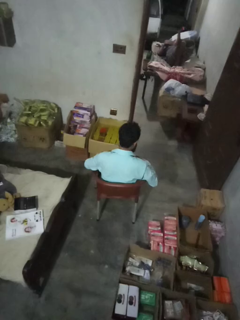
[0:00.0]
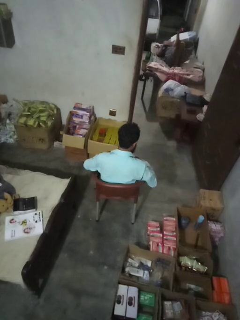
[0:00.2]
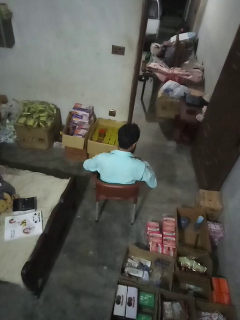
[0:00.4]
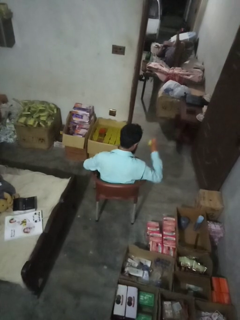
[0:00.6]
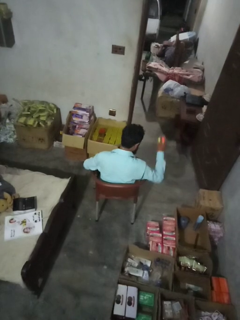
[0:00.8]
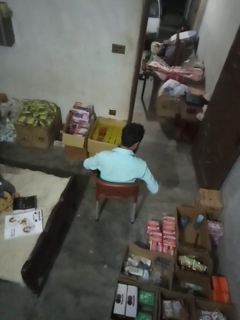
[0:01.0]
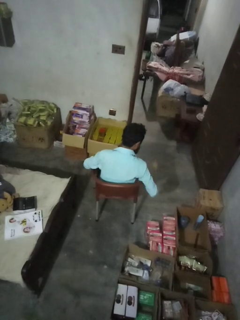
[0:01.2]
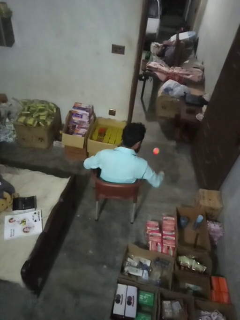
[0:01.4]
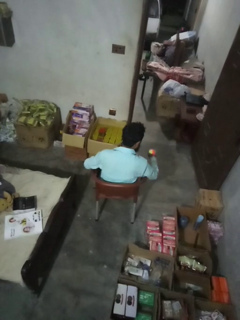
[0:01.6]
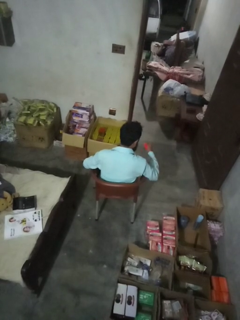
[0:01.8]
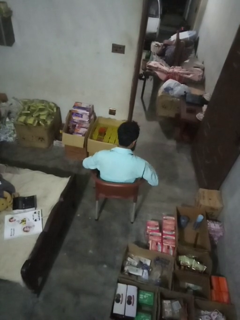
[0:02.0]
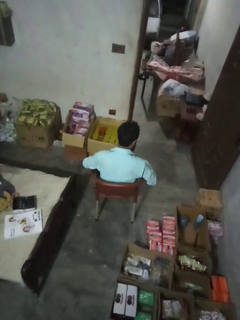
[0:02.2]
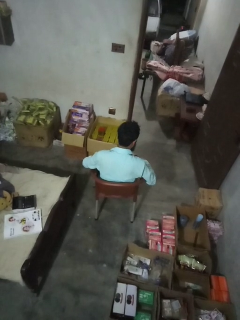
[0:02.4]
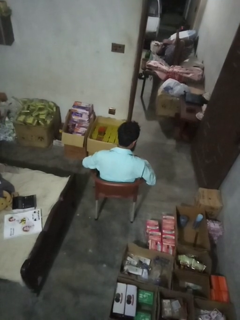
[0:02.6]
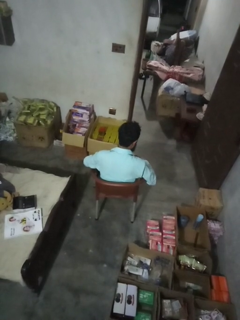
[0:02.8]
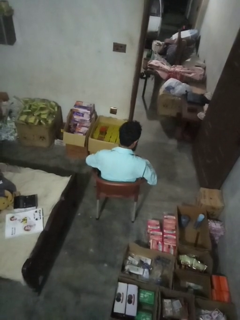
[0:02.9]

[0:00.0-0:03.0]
person bounces ball on floor

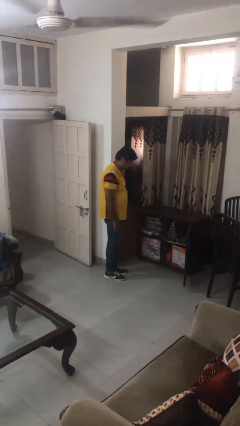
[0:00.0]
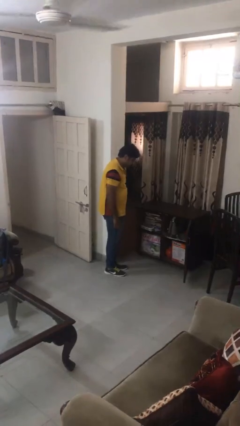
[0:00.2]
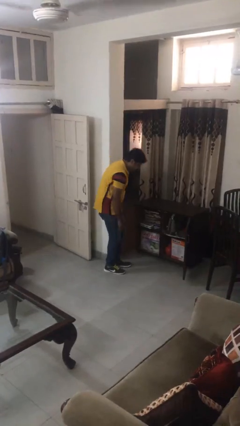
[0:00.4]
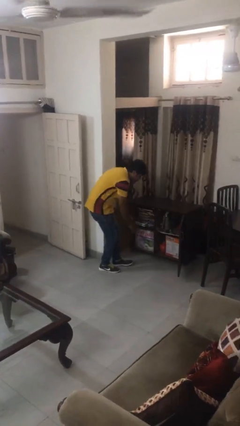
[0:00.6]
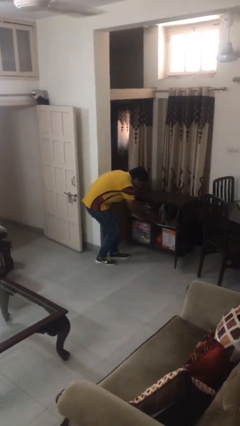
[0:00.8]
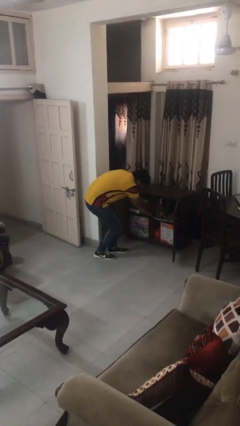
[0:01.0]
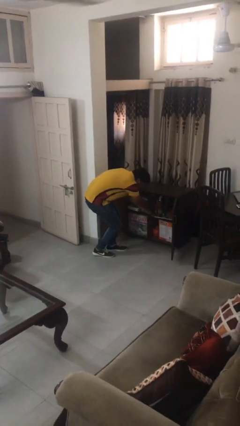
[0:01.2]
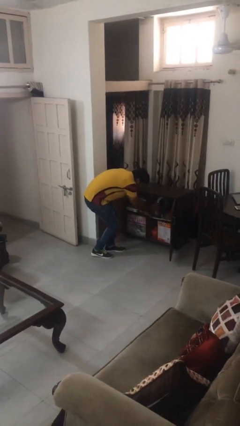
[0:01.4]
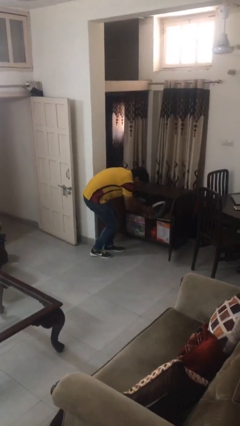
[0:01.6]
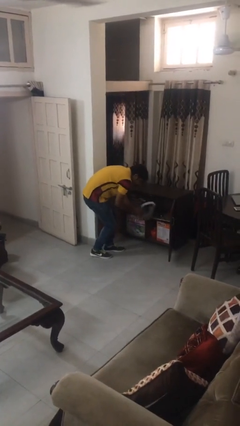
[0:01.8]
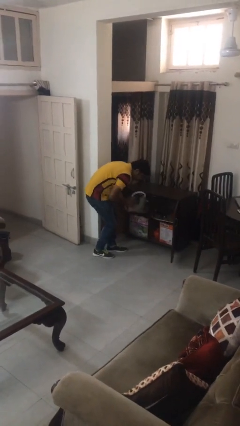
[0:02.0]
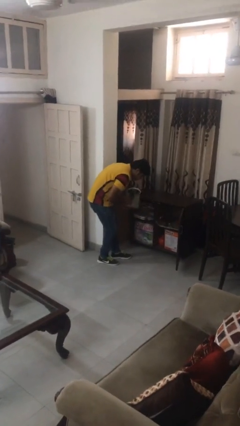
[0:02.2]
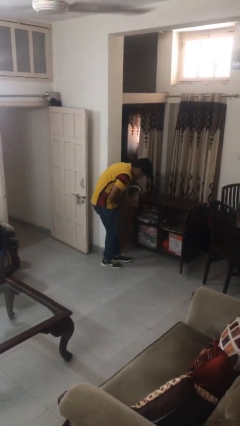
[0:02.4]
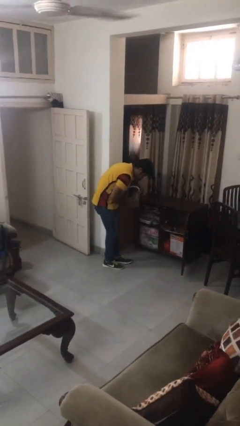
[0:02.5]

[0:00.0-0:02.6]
person picks up object from cabinet

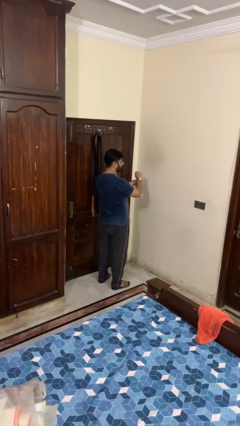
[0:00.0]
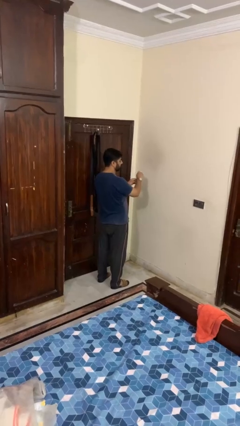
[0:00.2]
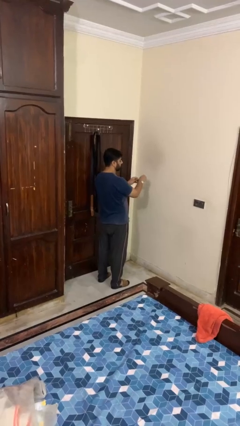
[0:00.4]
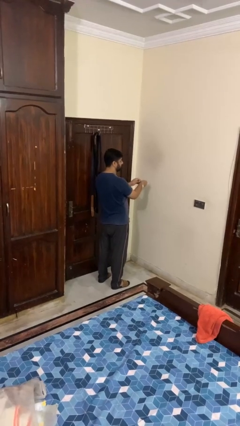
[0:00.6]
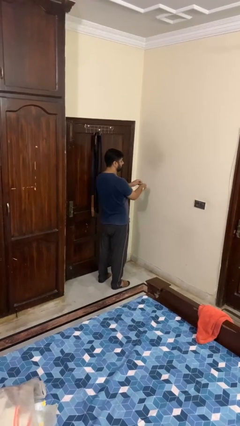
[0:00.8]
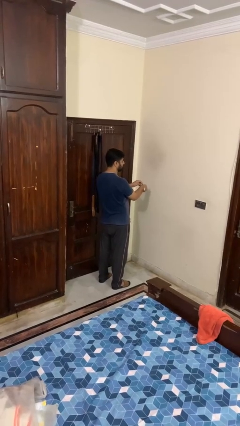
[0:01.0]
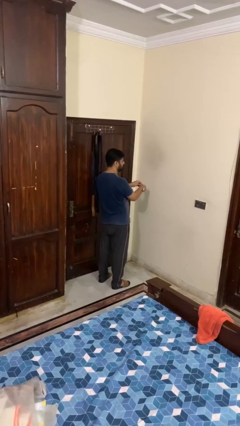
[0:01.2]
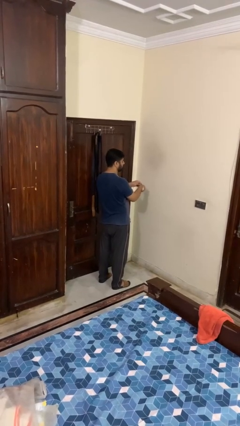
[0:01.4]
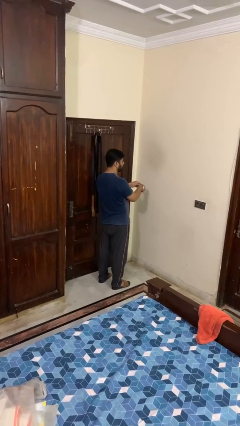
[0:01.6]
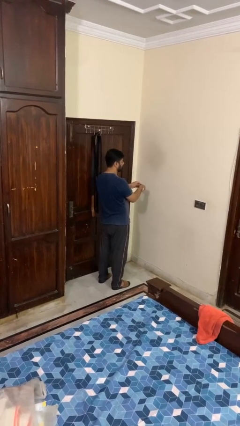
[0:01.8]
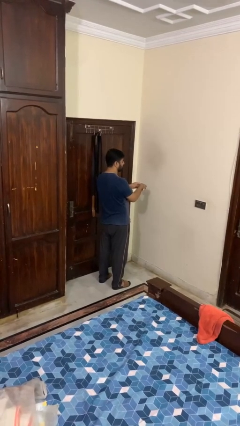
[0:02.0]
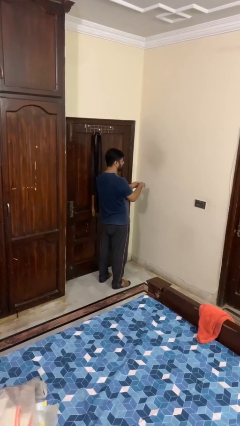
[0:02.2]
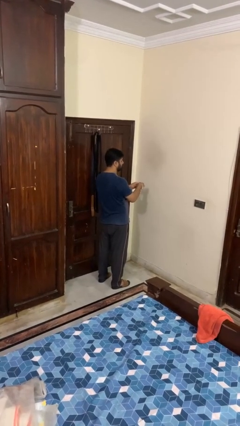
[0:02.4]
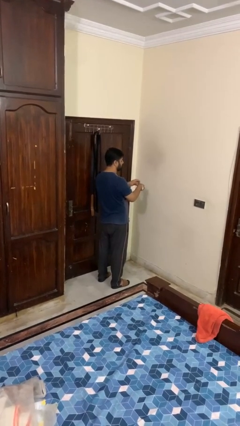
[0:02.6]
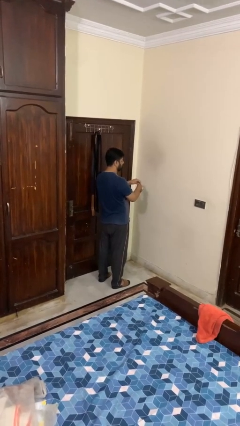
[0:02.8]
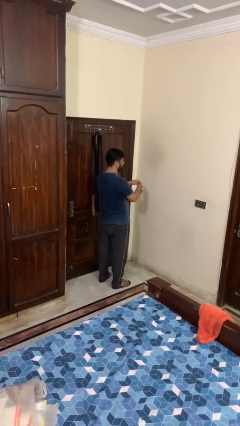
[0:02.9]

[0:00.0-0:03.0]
person takes off wristwatch

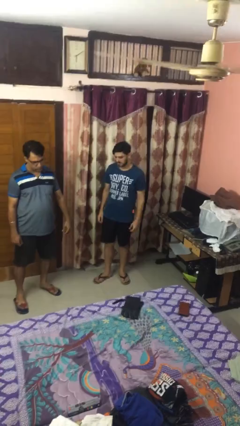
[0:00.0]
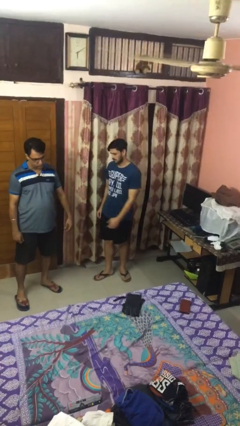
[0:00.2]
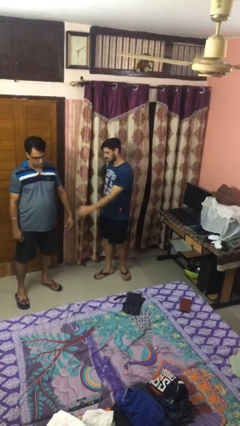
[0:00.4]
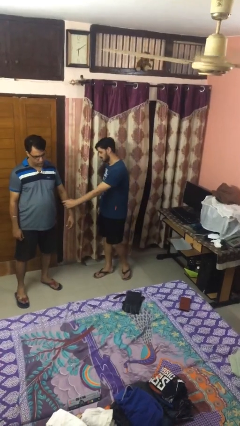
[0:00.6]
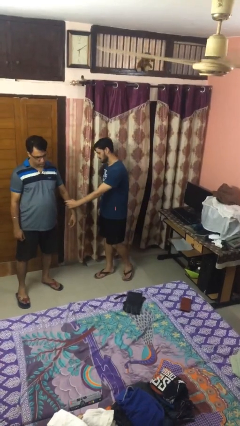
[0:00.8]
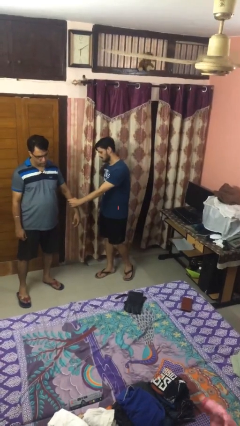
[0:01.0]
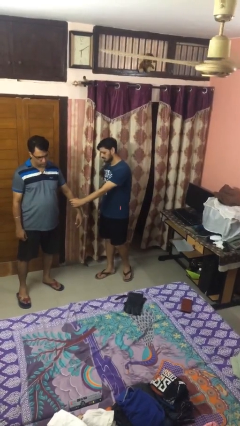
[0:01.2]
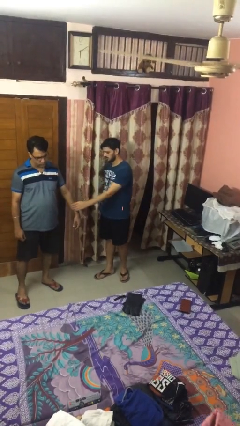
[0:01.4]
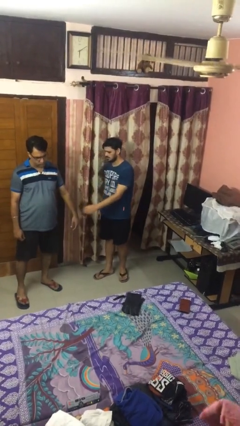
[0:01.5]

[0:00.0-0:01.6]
person grabs person by forearm

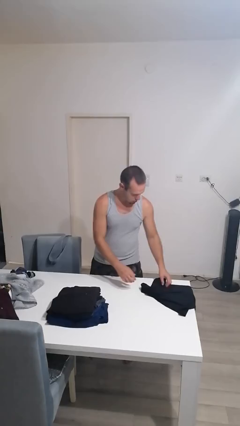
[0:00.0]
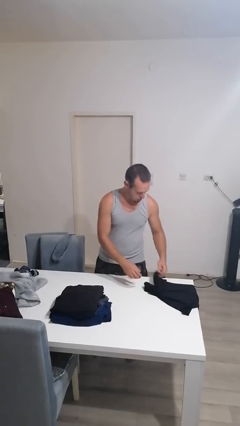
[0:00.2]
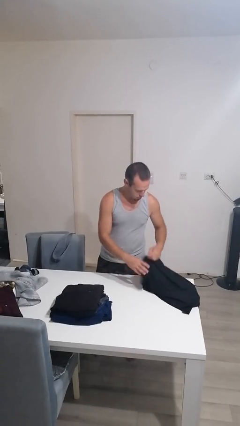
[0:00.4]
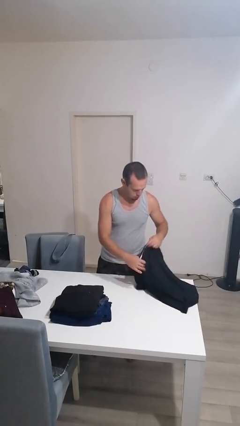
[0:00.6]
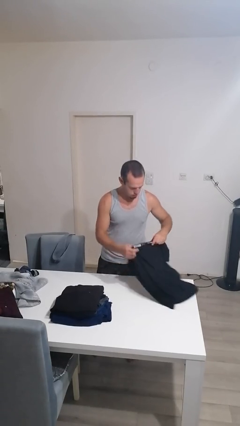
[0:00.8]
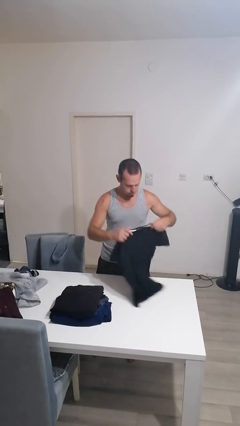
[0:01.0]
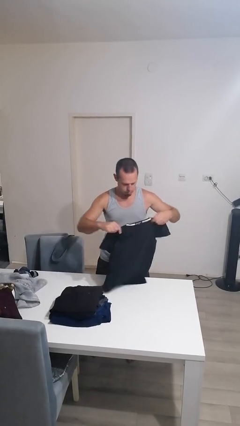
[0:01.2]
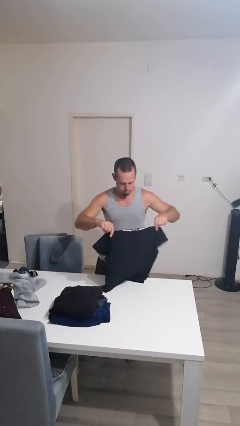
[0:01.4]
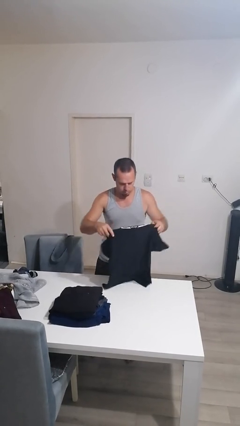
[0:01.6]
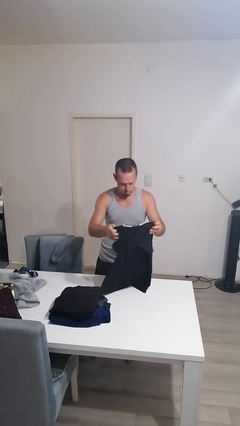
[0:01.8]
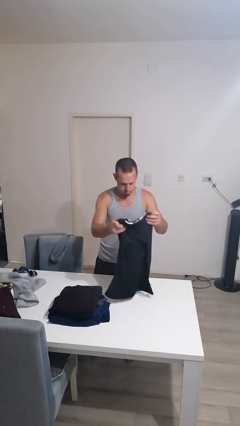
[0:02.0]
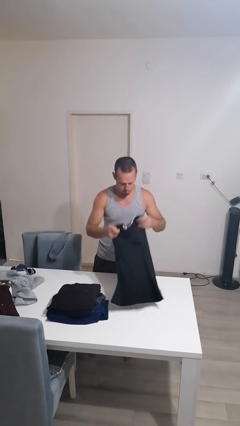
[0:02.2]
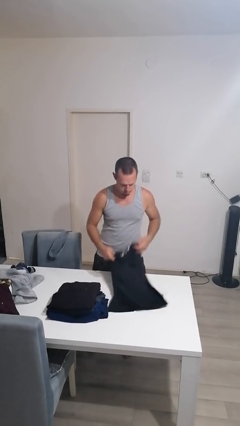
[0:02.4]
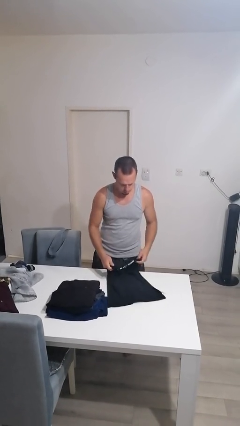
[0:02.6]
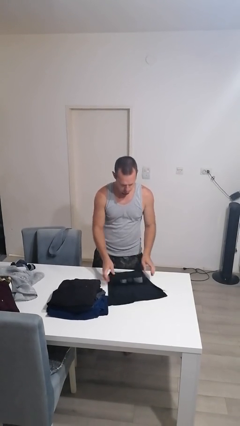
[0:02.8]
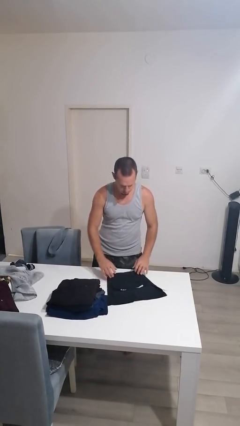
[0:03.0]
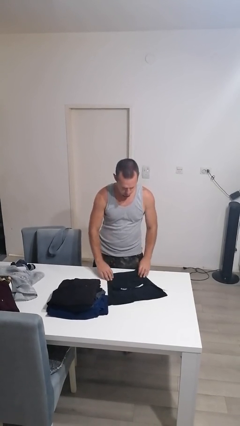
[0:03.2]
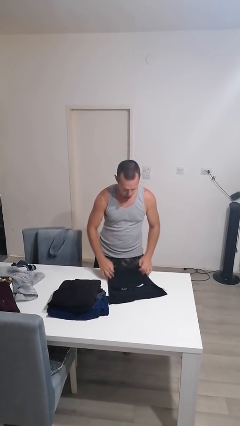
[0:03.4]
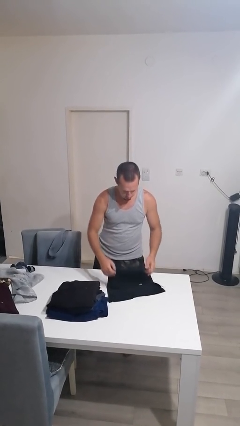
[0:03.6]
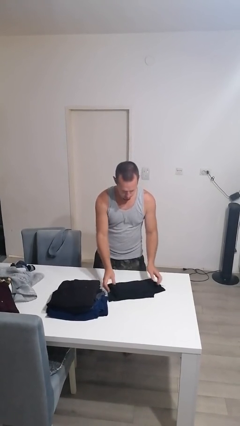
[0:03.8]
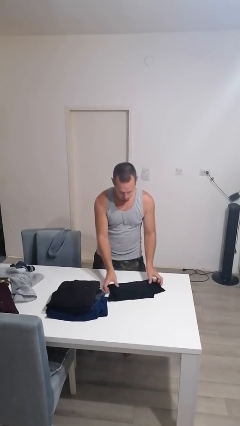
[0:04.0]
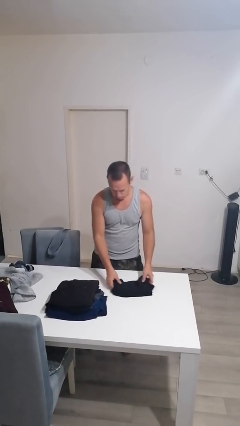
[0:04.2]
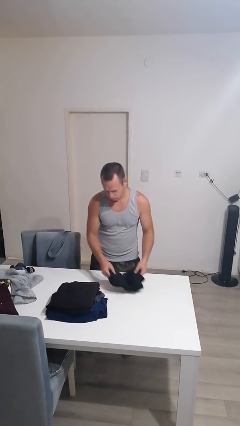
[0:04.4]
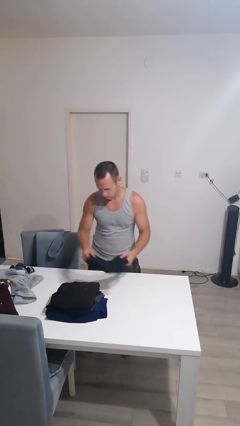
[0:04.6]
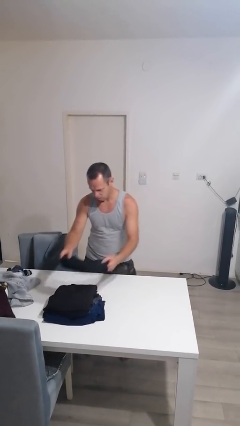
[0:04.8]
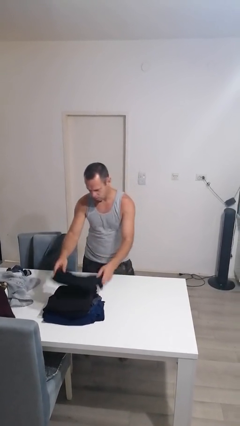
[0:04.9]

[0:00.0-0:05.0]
person folds shirt

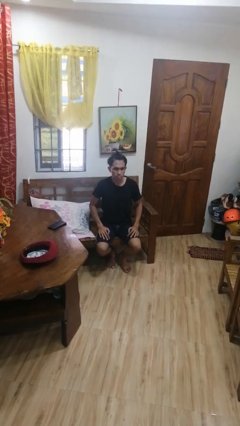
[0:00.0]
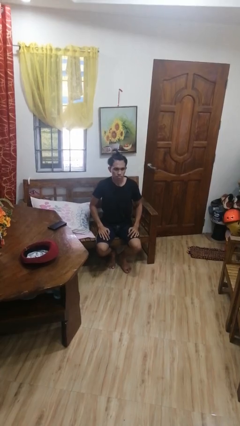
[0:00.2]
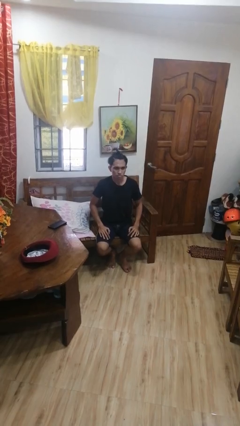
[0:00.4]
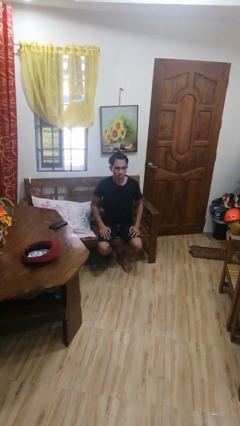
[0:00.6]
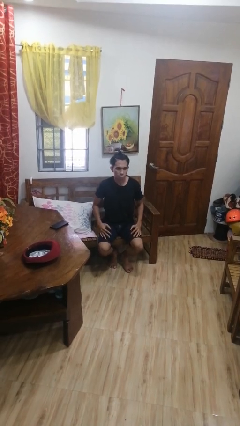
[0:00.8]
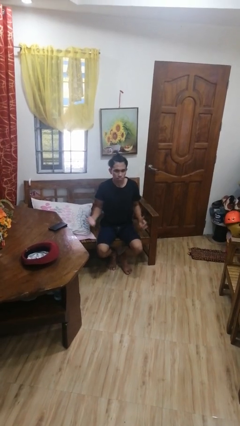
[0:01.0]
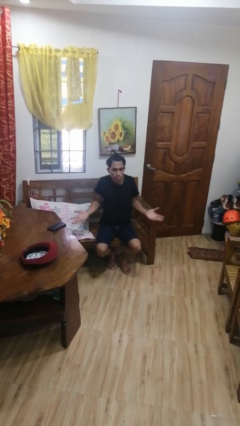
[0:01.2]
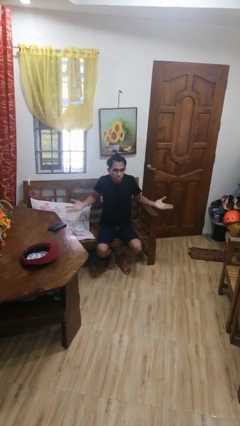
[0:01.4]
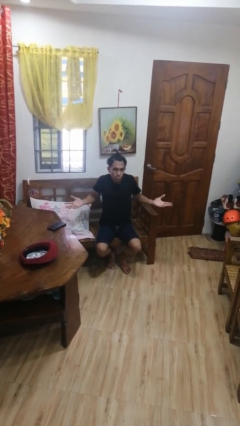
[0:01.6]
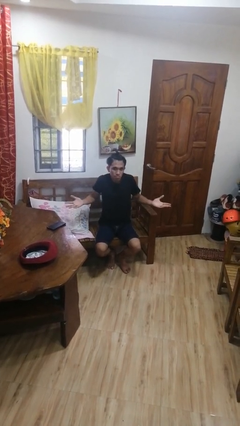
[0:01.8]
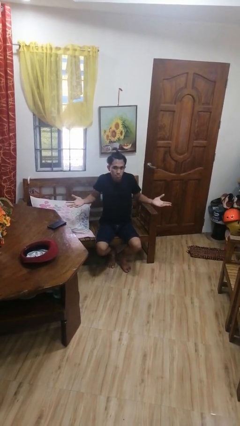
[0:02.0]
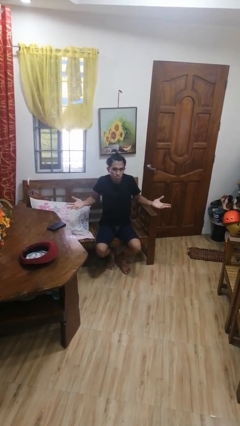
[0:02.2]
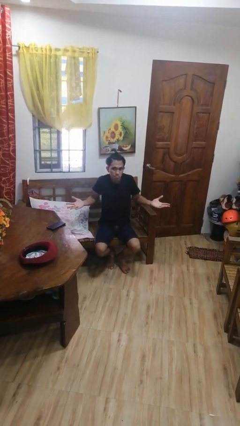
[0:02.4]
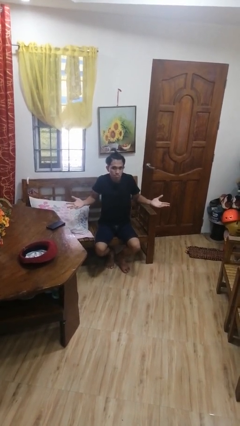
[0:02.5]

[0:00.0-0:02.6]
person shrugs

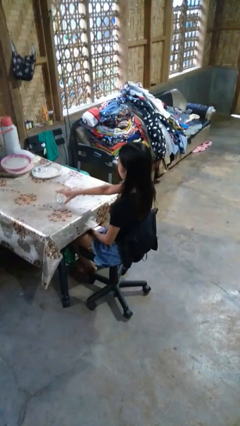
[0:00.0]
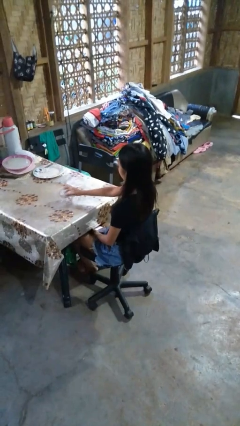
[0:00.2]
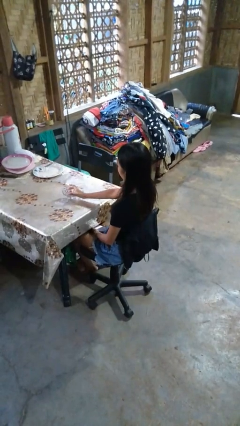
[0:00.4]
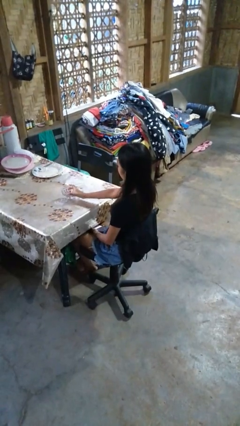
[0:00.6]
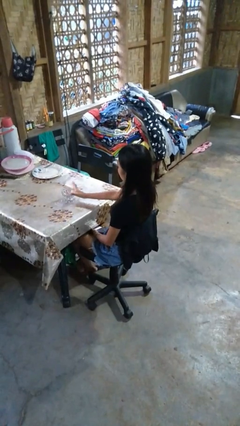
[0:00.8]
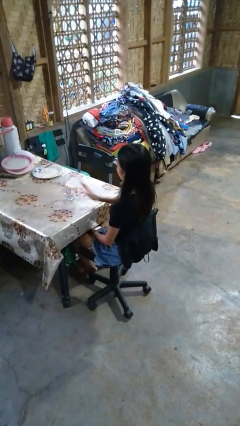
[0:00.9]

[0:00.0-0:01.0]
person sets upright glass
